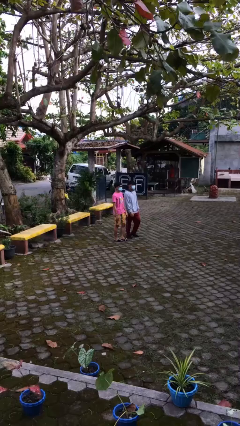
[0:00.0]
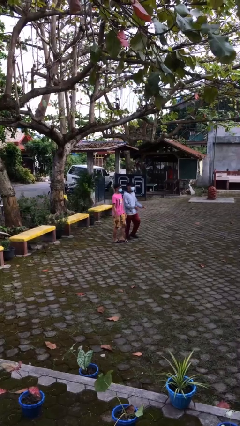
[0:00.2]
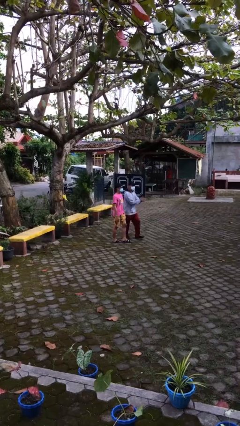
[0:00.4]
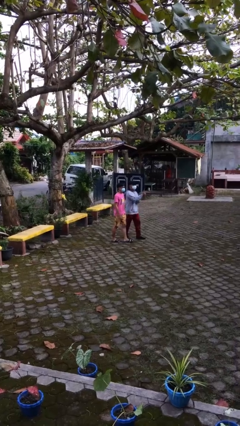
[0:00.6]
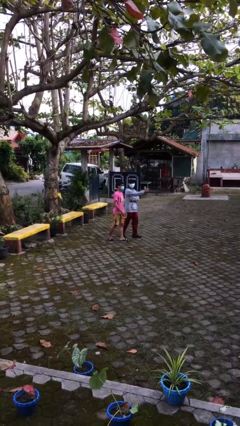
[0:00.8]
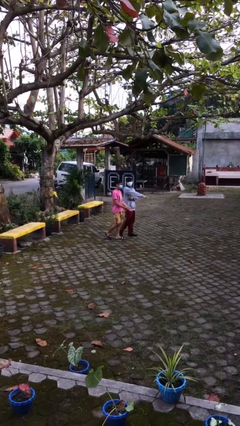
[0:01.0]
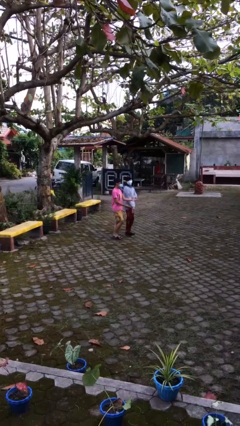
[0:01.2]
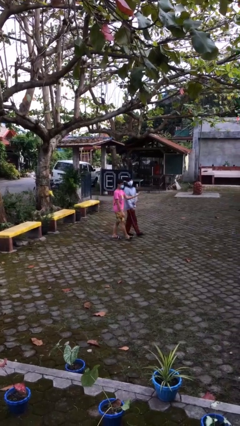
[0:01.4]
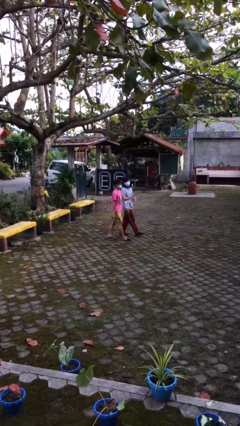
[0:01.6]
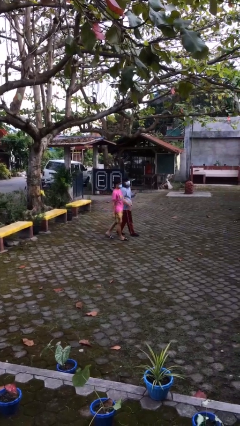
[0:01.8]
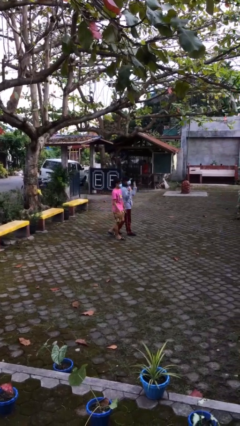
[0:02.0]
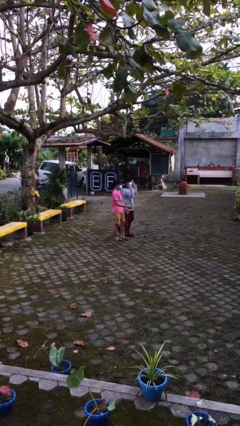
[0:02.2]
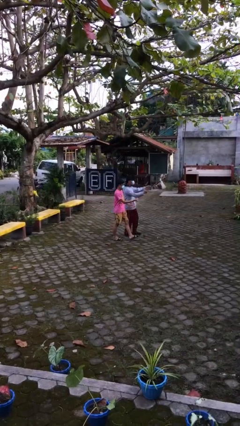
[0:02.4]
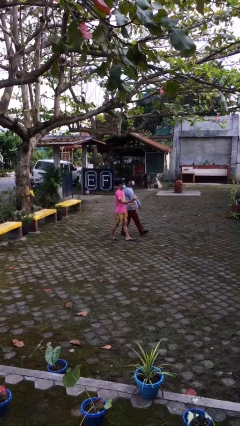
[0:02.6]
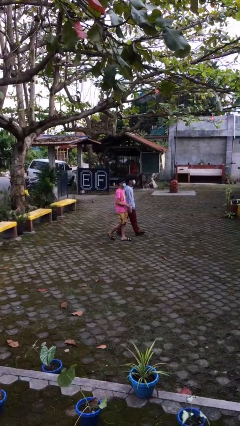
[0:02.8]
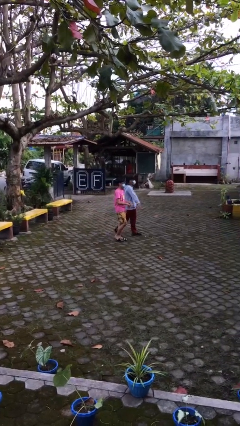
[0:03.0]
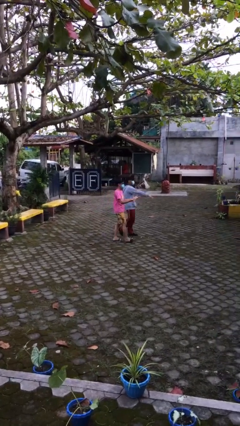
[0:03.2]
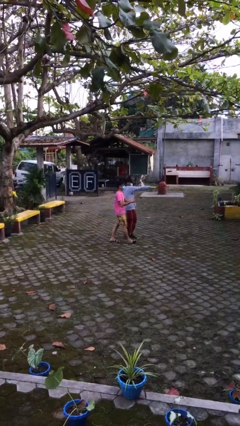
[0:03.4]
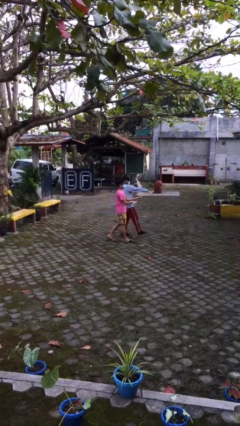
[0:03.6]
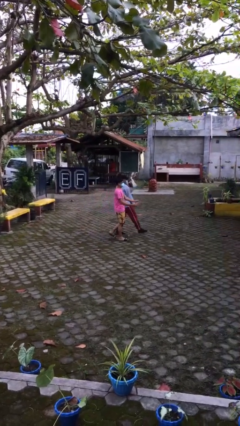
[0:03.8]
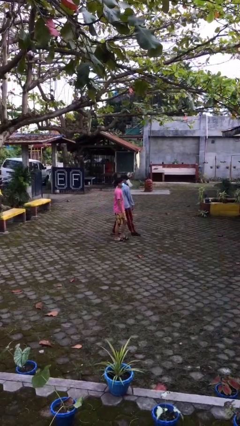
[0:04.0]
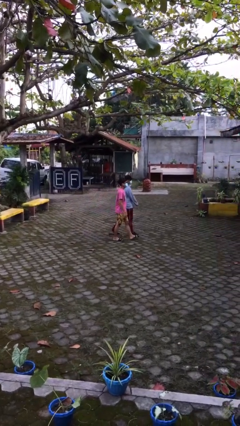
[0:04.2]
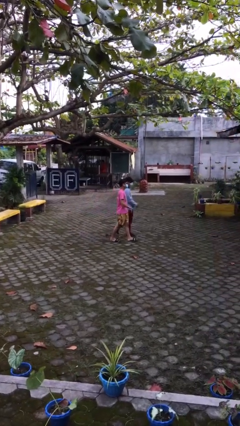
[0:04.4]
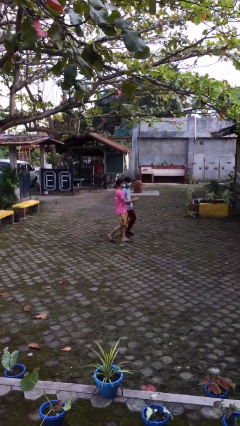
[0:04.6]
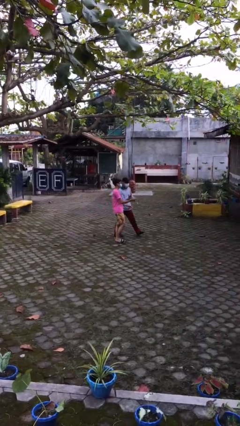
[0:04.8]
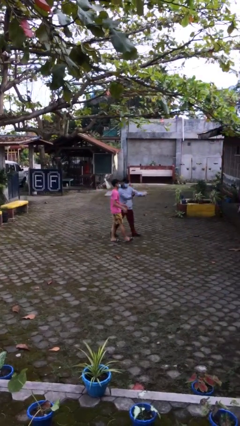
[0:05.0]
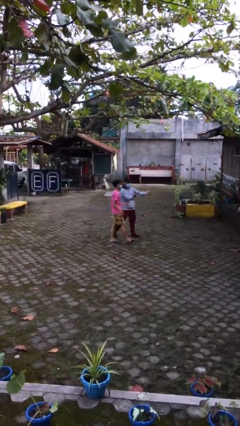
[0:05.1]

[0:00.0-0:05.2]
person talks to person

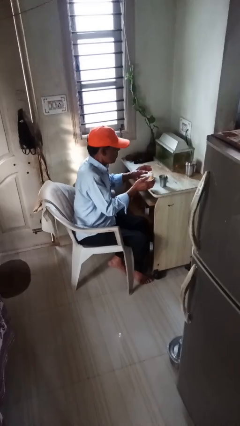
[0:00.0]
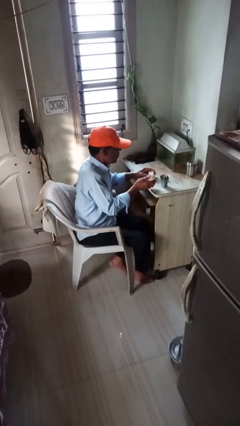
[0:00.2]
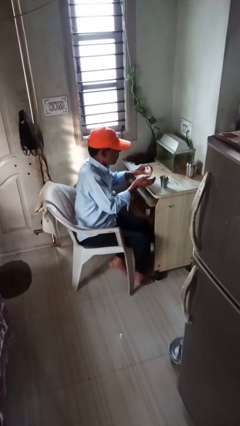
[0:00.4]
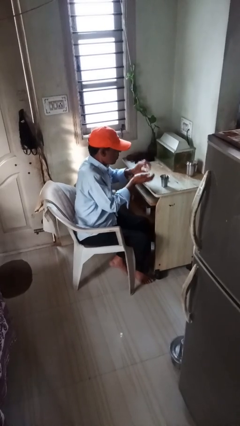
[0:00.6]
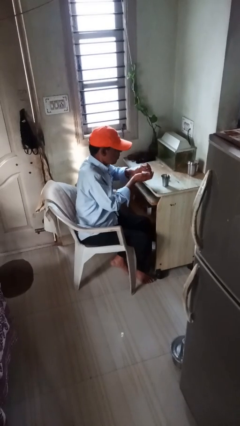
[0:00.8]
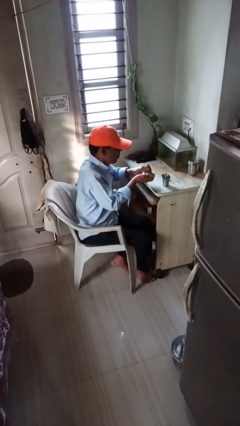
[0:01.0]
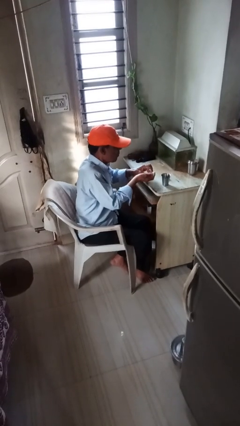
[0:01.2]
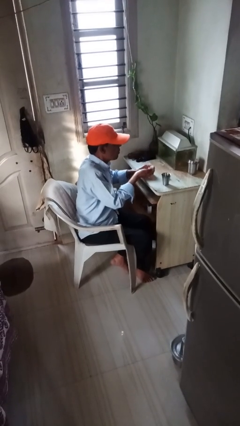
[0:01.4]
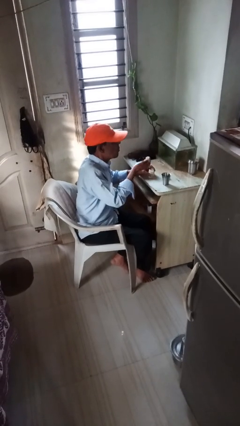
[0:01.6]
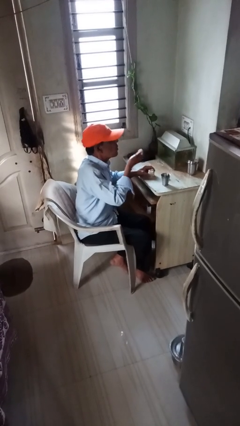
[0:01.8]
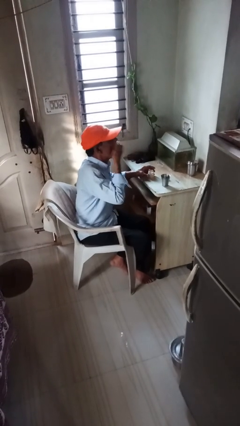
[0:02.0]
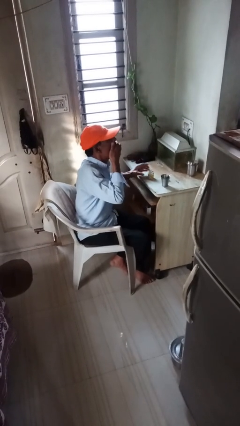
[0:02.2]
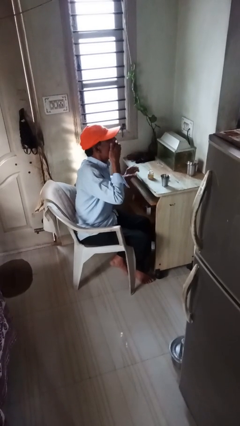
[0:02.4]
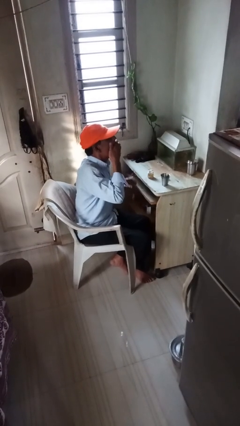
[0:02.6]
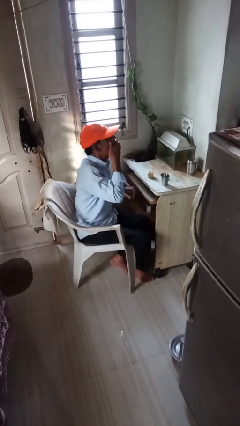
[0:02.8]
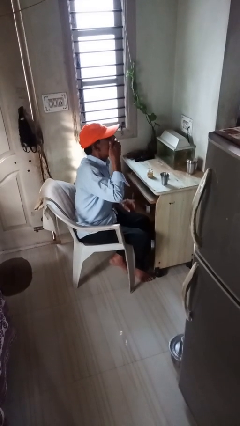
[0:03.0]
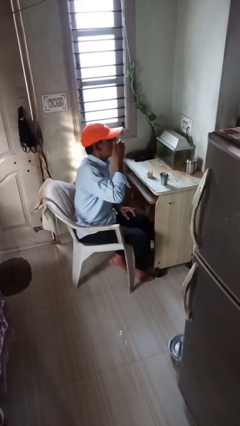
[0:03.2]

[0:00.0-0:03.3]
person takes medicine pills

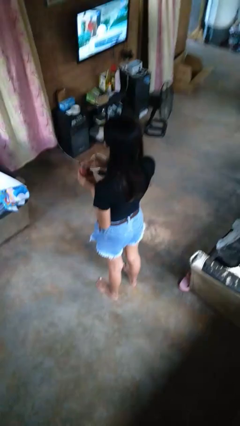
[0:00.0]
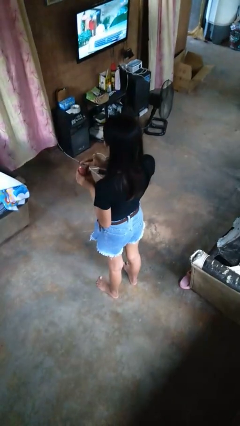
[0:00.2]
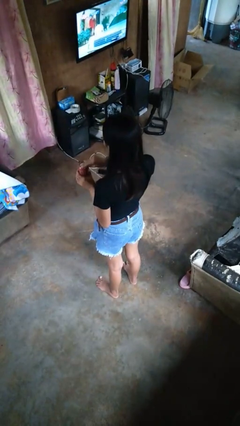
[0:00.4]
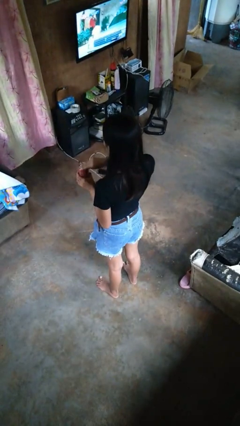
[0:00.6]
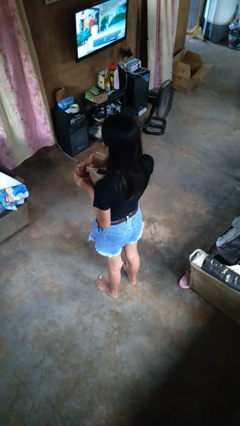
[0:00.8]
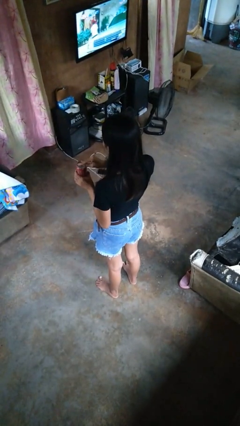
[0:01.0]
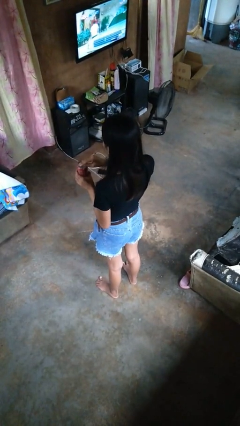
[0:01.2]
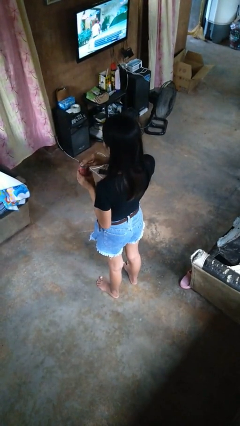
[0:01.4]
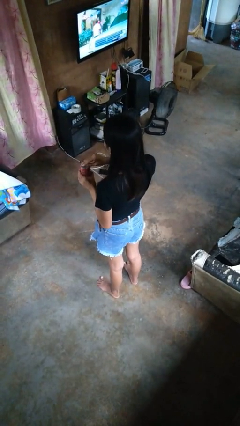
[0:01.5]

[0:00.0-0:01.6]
person opens beverage can

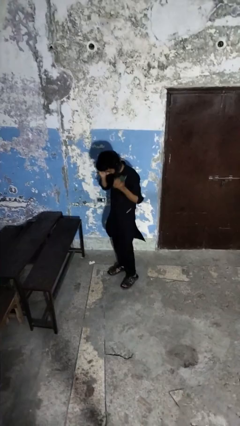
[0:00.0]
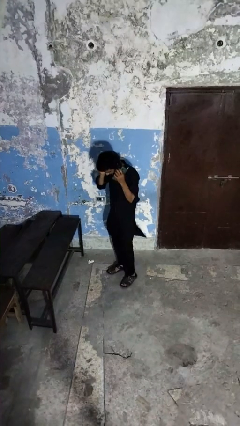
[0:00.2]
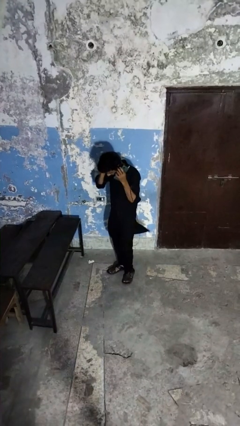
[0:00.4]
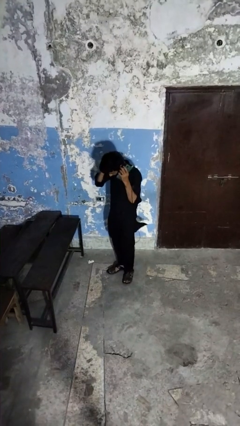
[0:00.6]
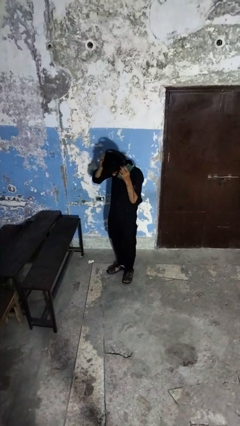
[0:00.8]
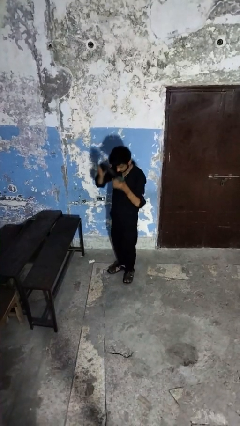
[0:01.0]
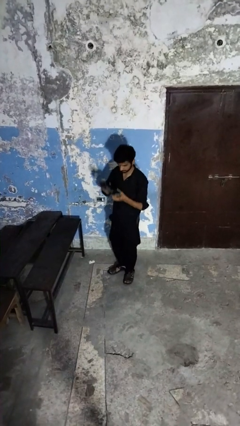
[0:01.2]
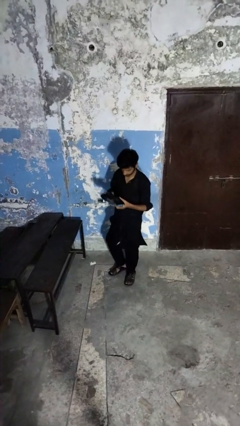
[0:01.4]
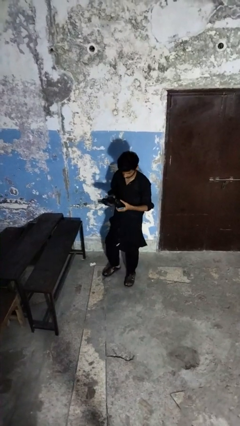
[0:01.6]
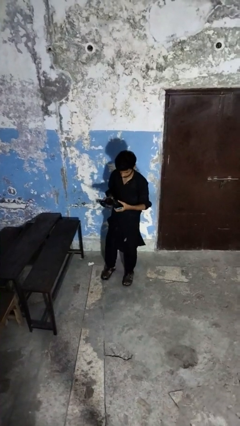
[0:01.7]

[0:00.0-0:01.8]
person takes off headphones

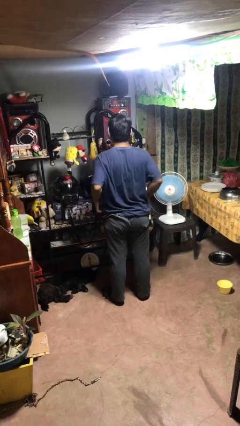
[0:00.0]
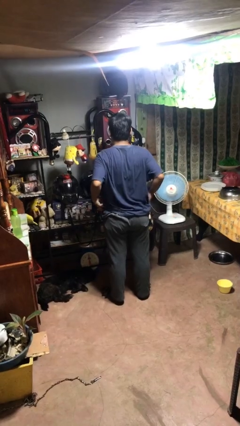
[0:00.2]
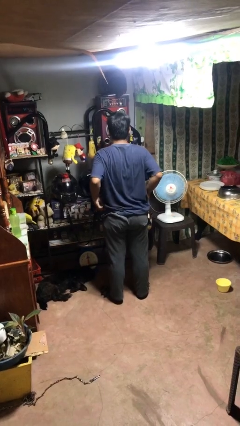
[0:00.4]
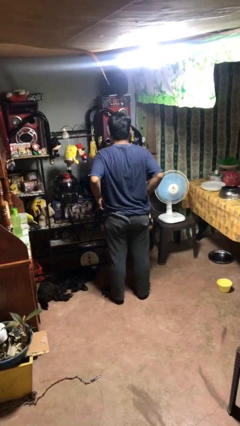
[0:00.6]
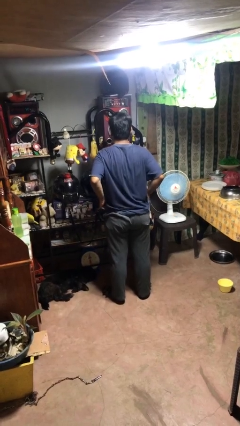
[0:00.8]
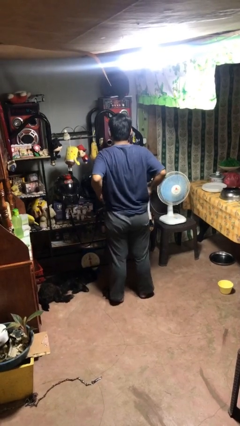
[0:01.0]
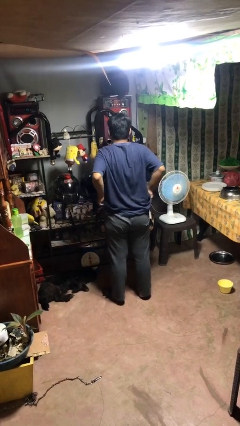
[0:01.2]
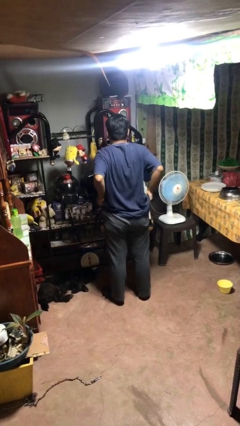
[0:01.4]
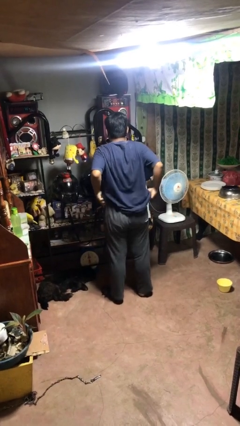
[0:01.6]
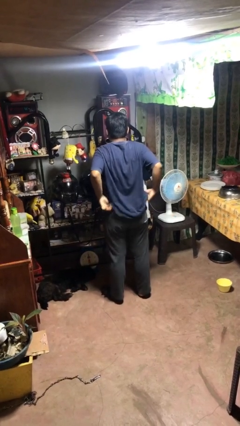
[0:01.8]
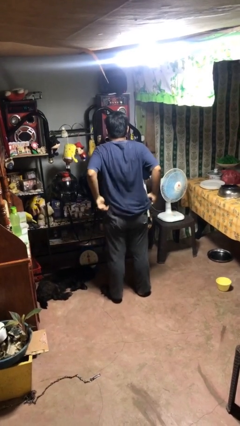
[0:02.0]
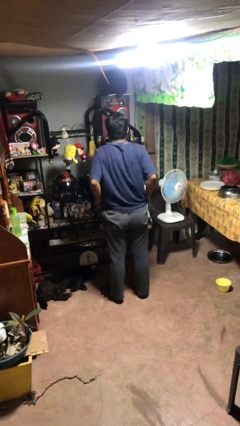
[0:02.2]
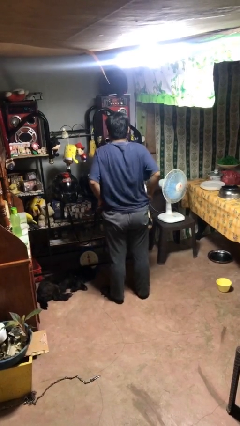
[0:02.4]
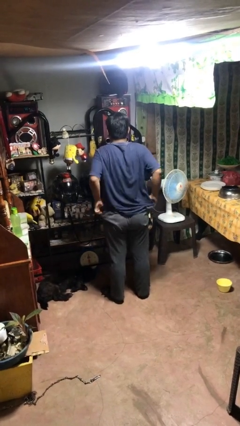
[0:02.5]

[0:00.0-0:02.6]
person hikes up pants

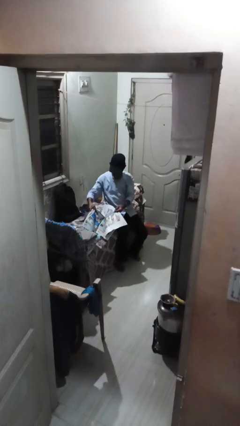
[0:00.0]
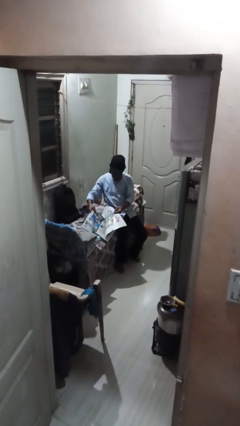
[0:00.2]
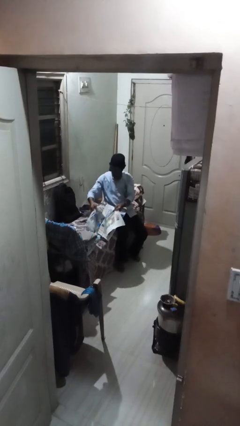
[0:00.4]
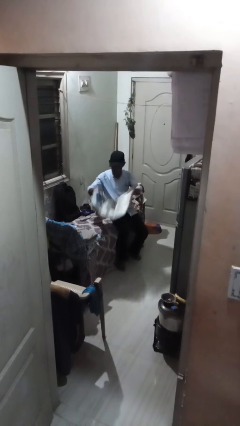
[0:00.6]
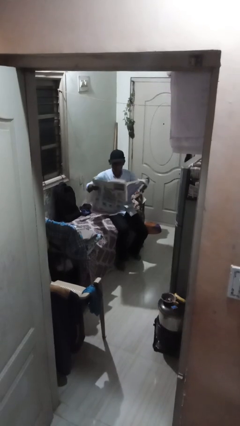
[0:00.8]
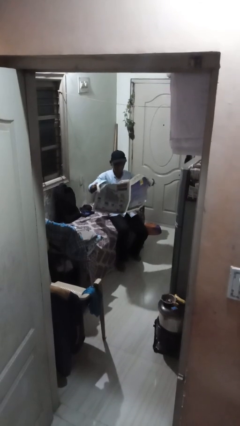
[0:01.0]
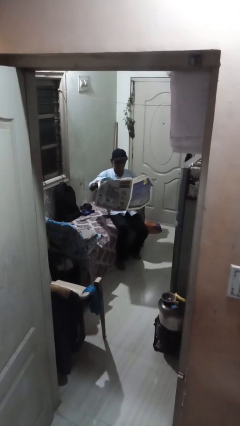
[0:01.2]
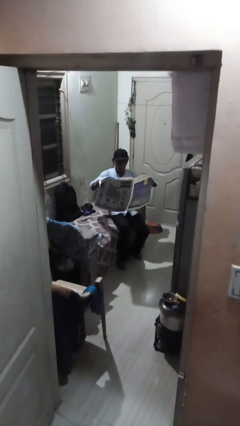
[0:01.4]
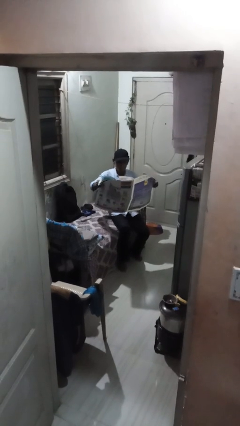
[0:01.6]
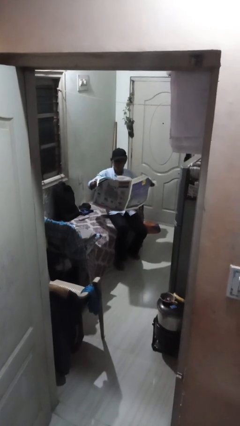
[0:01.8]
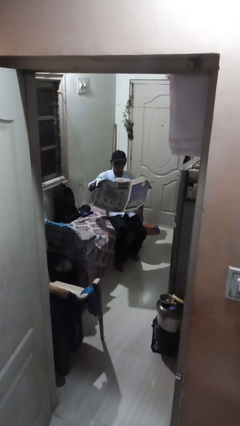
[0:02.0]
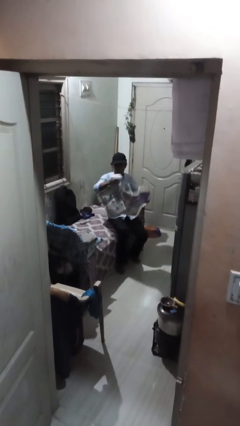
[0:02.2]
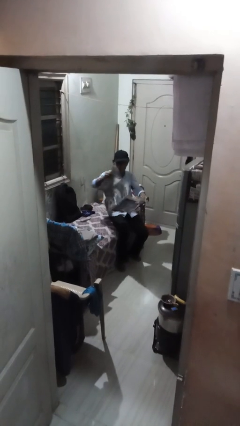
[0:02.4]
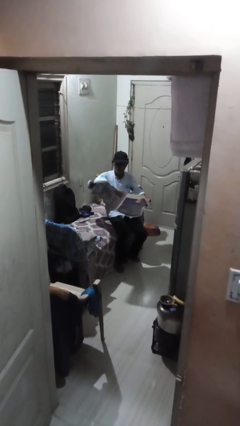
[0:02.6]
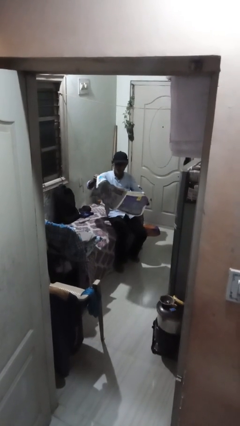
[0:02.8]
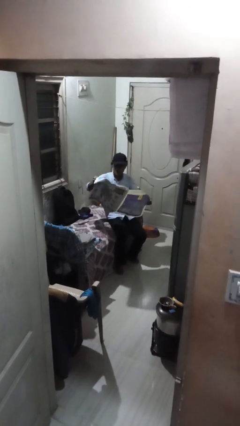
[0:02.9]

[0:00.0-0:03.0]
person reads newspaper

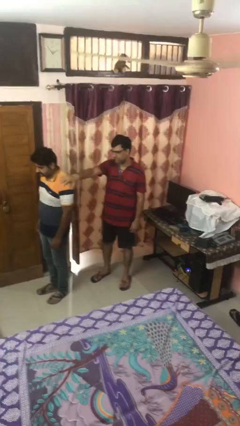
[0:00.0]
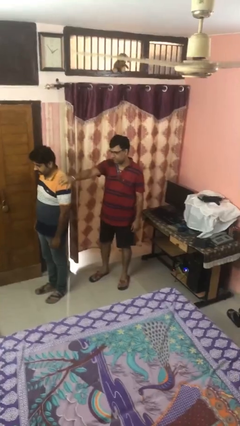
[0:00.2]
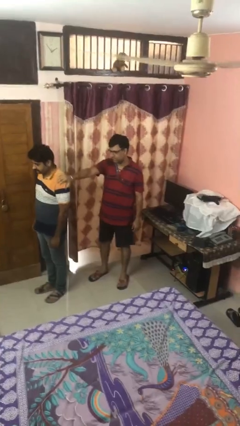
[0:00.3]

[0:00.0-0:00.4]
person grabs person by shoulder
